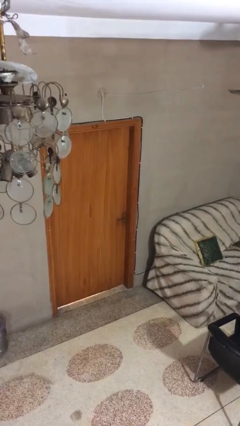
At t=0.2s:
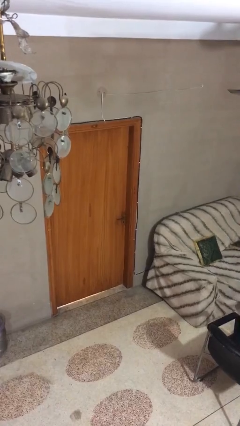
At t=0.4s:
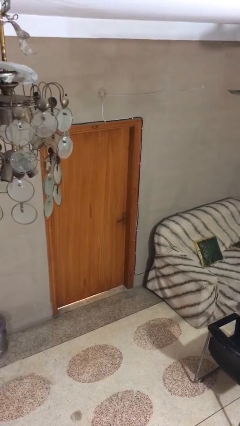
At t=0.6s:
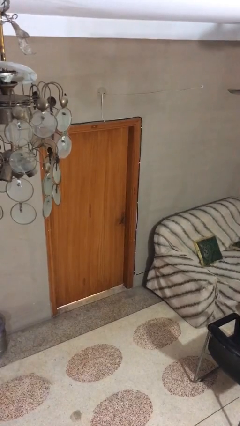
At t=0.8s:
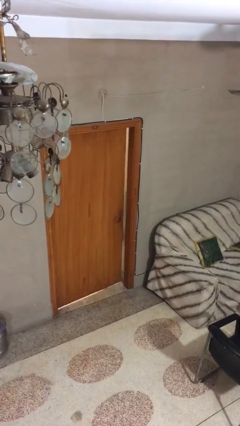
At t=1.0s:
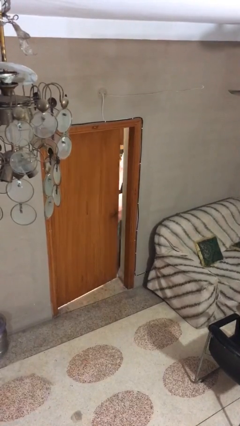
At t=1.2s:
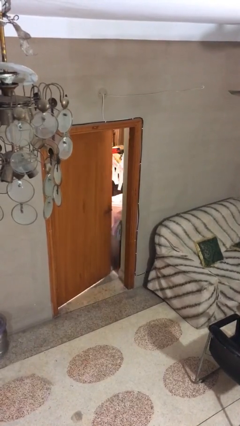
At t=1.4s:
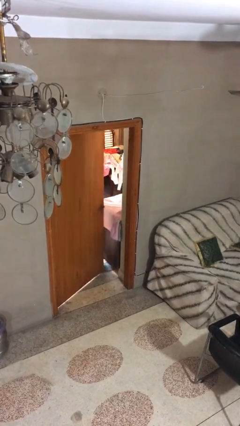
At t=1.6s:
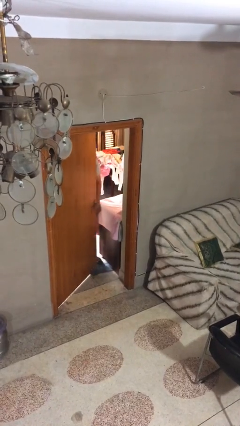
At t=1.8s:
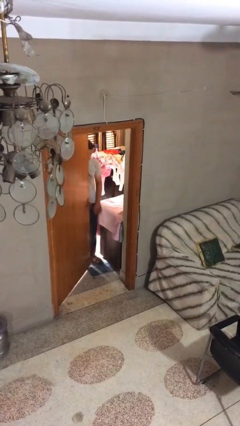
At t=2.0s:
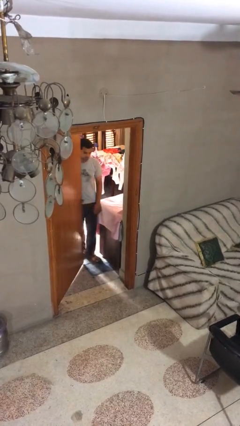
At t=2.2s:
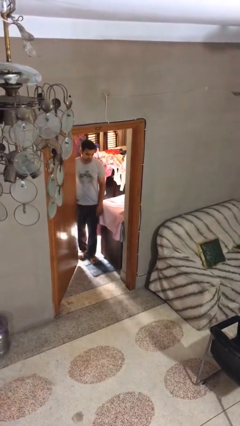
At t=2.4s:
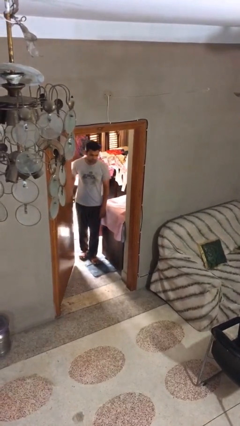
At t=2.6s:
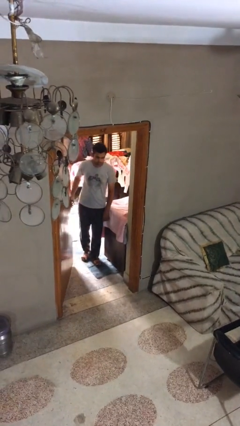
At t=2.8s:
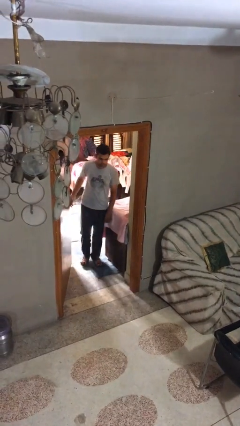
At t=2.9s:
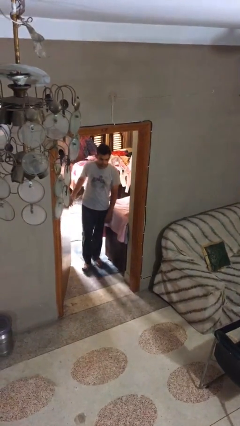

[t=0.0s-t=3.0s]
person opens facility door

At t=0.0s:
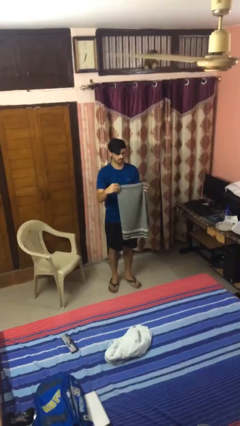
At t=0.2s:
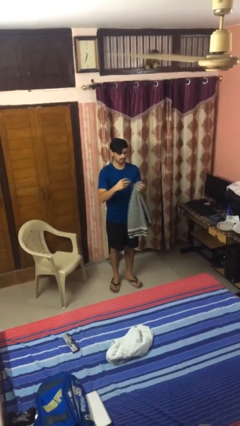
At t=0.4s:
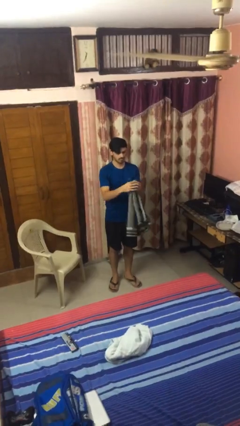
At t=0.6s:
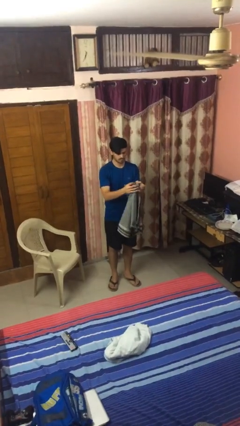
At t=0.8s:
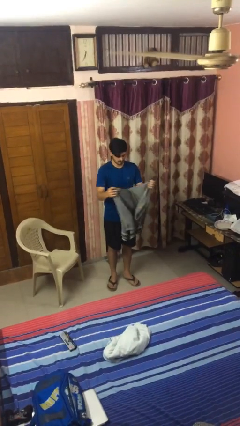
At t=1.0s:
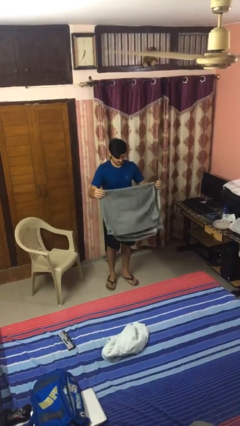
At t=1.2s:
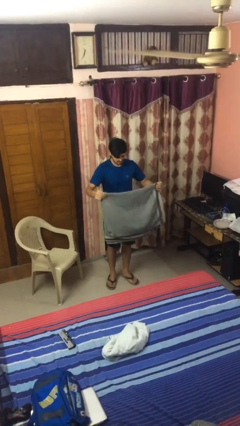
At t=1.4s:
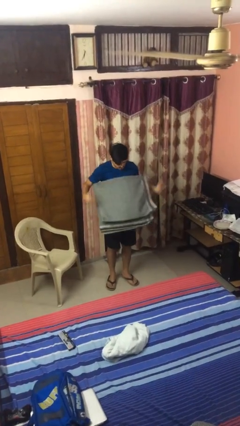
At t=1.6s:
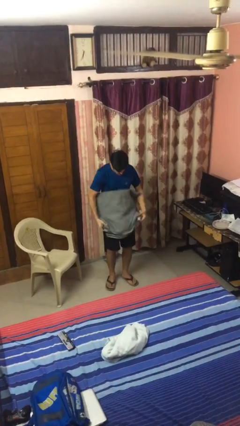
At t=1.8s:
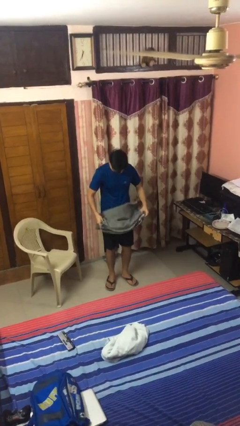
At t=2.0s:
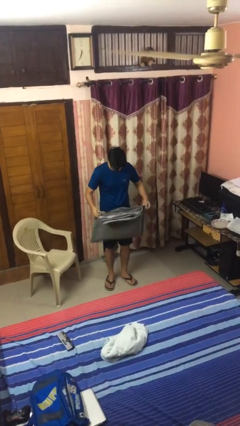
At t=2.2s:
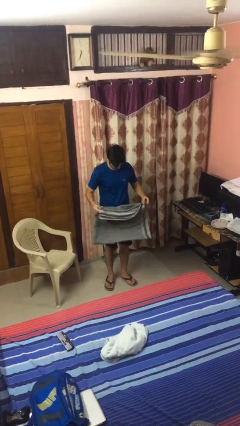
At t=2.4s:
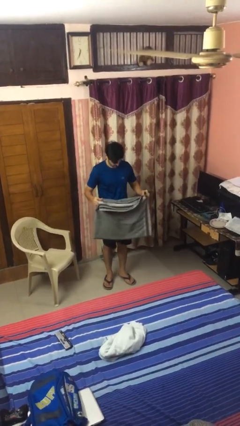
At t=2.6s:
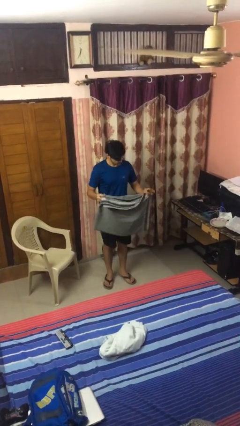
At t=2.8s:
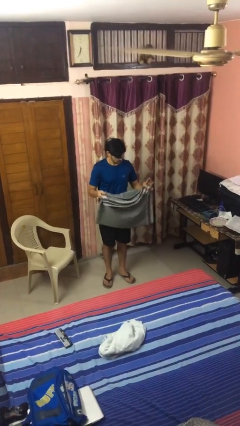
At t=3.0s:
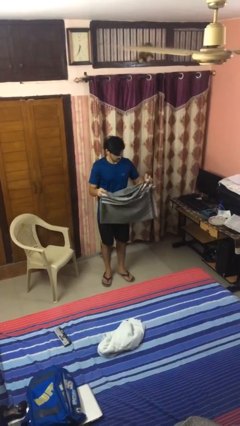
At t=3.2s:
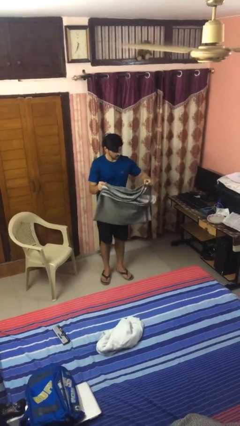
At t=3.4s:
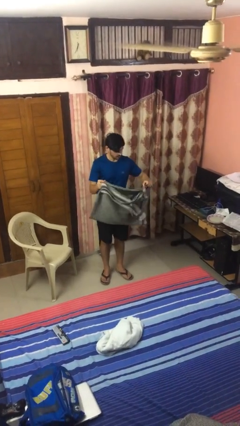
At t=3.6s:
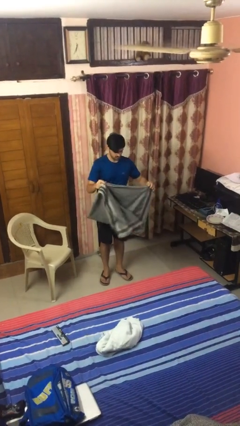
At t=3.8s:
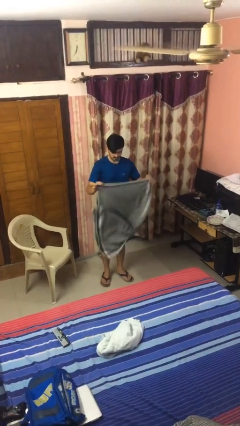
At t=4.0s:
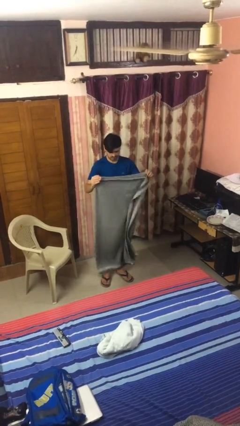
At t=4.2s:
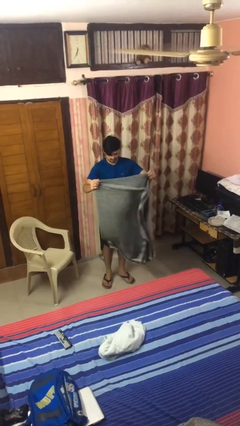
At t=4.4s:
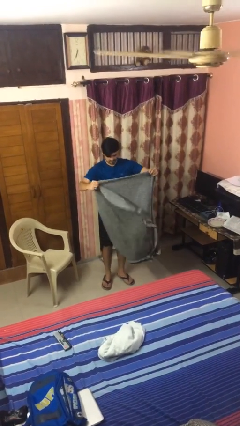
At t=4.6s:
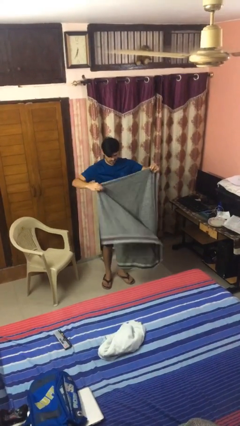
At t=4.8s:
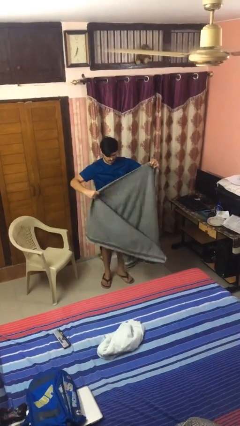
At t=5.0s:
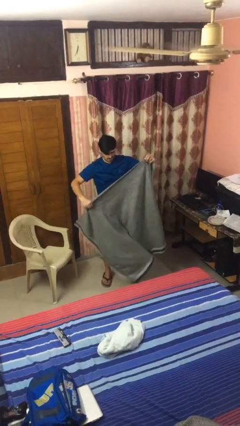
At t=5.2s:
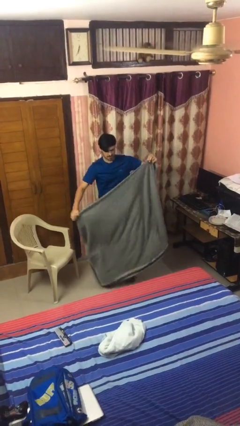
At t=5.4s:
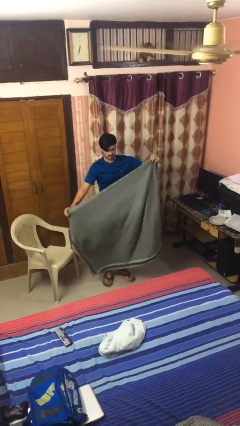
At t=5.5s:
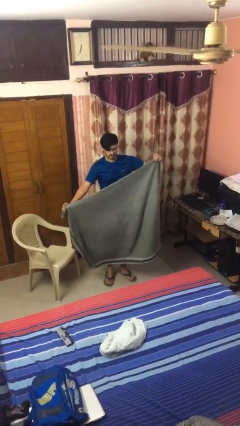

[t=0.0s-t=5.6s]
person unfolds blanket

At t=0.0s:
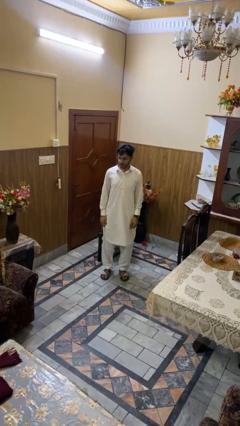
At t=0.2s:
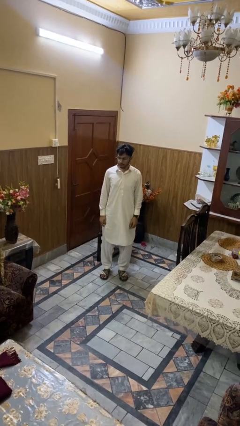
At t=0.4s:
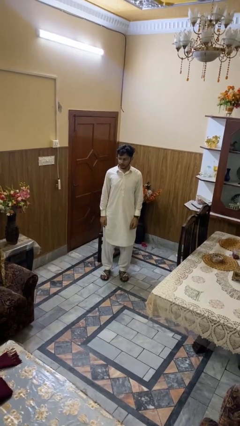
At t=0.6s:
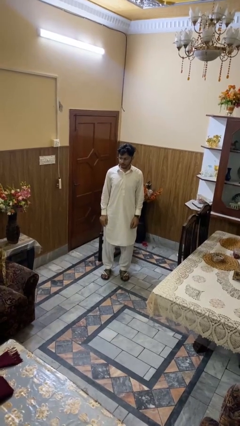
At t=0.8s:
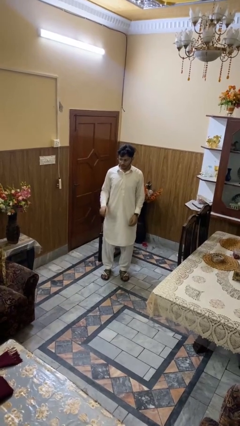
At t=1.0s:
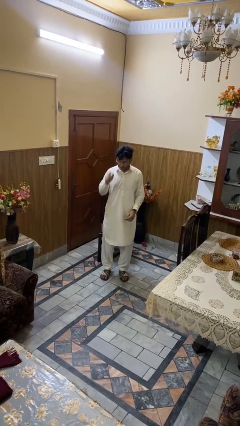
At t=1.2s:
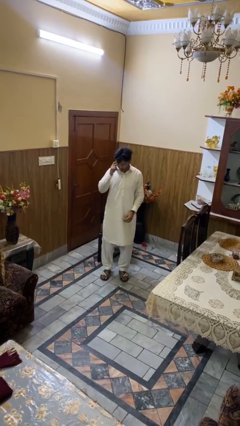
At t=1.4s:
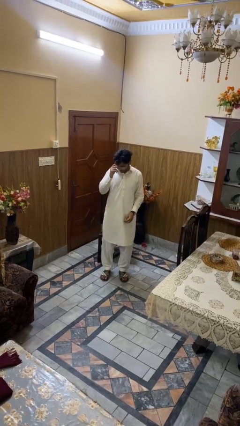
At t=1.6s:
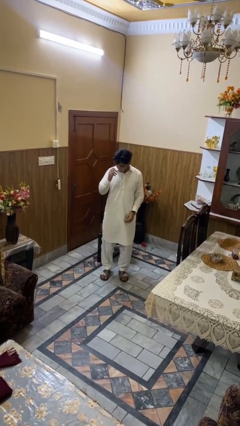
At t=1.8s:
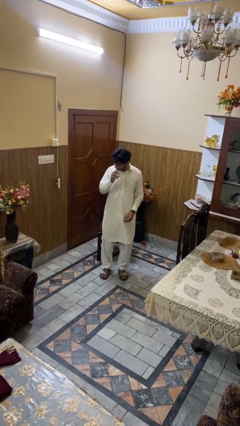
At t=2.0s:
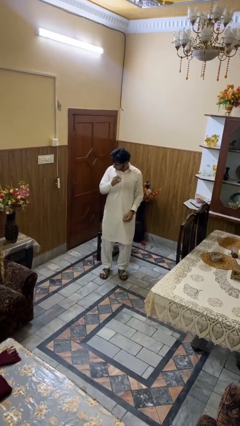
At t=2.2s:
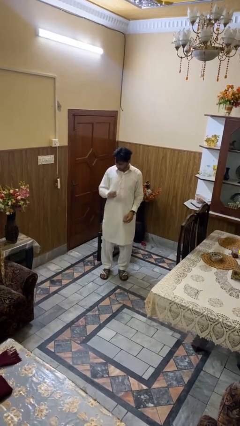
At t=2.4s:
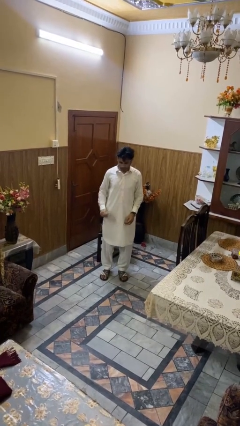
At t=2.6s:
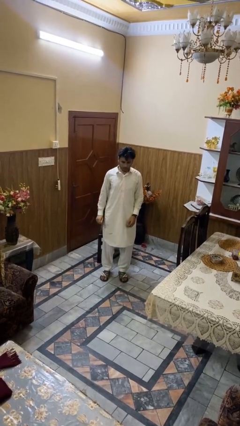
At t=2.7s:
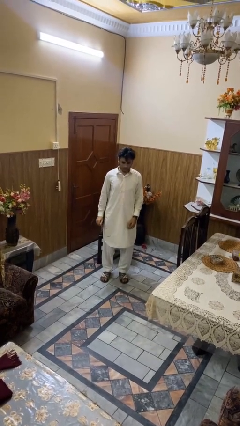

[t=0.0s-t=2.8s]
person takes off glasses

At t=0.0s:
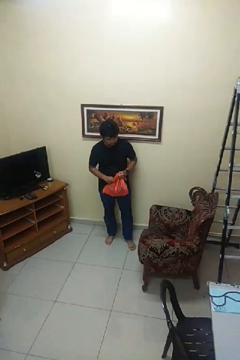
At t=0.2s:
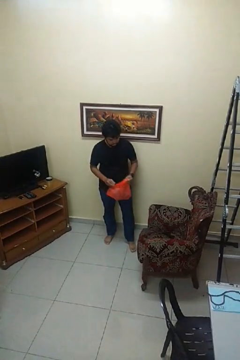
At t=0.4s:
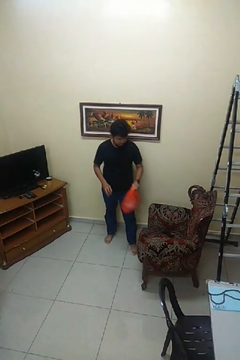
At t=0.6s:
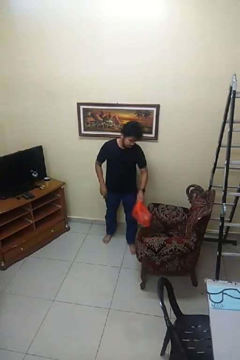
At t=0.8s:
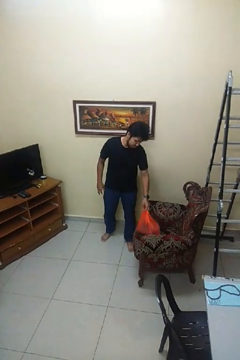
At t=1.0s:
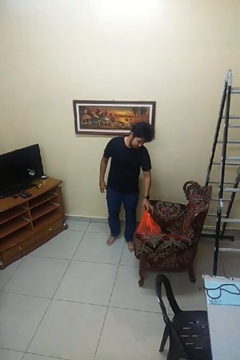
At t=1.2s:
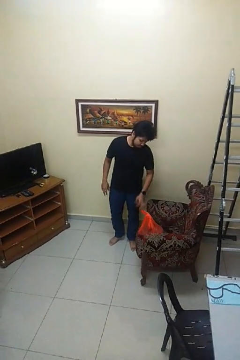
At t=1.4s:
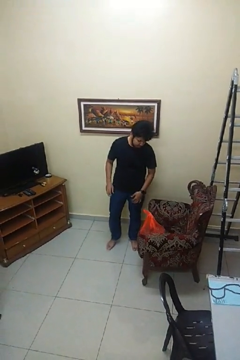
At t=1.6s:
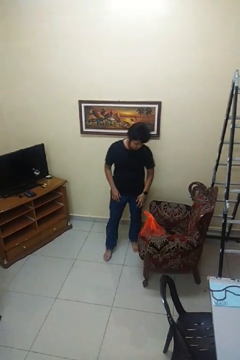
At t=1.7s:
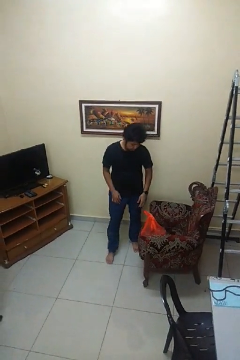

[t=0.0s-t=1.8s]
person puts down object on couch

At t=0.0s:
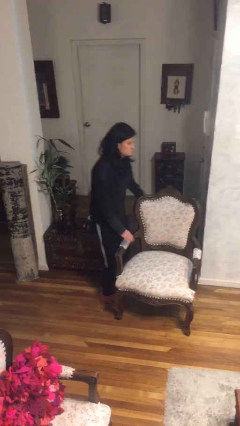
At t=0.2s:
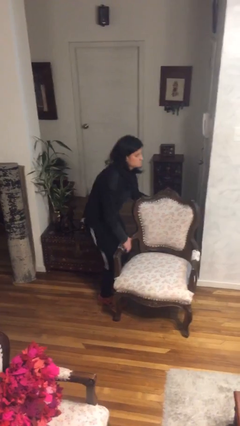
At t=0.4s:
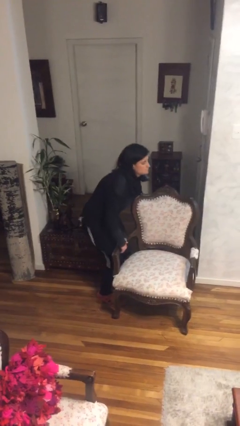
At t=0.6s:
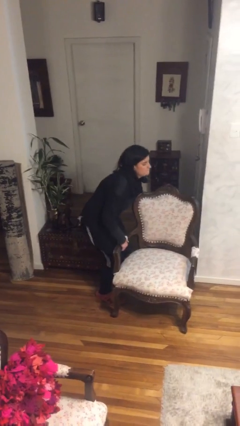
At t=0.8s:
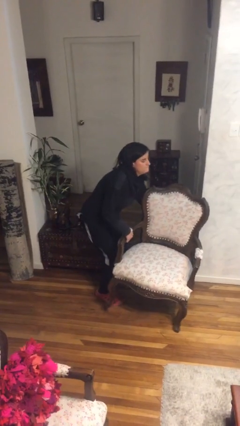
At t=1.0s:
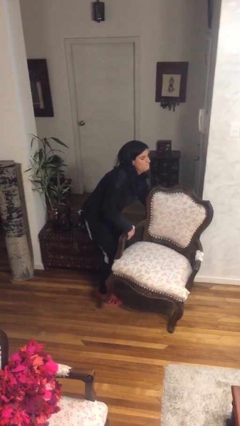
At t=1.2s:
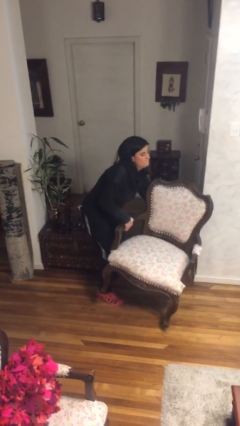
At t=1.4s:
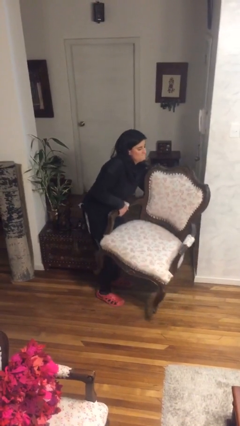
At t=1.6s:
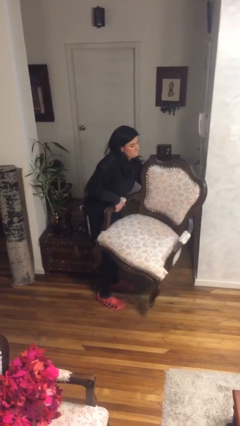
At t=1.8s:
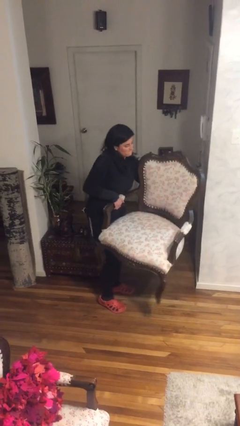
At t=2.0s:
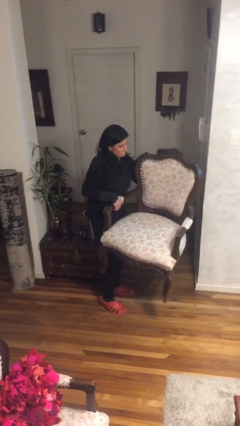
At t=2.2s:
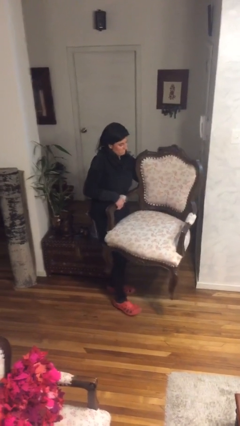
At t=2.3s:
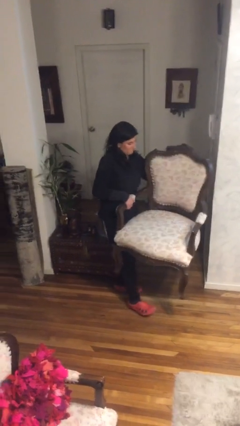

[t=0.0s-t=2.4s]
person picks up object from floor

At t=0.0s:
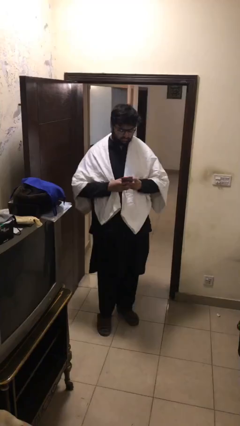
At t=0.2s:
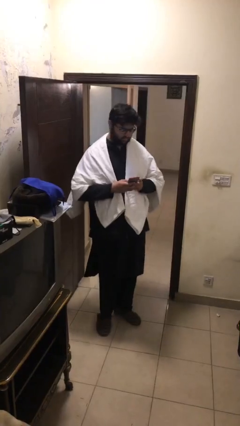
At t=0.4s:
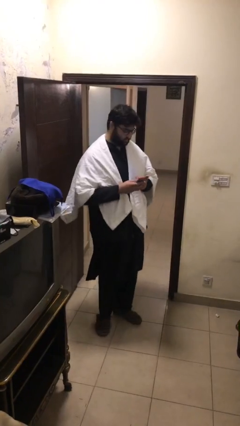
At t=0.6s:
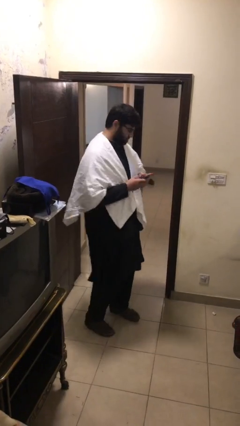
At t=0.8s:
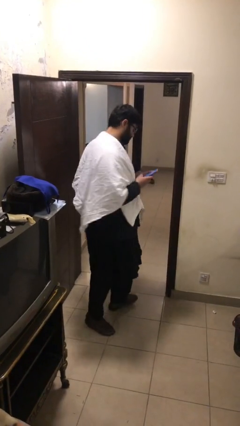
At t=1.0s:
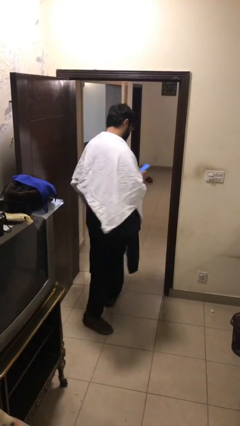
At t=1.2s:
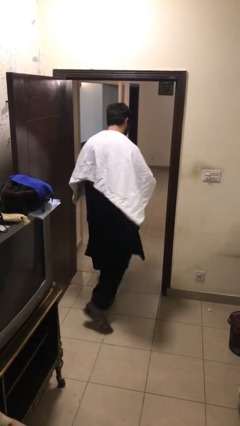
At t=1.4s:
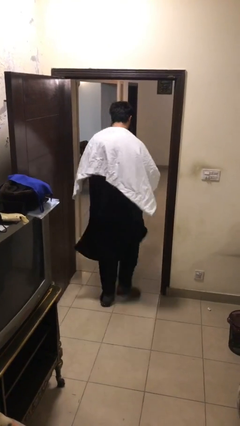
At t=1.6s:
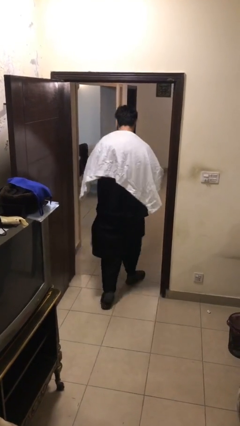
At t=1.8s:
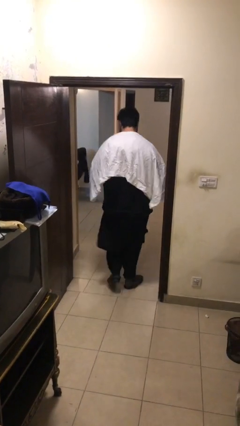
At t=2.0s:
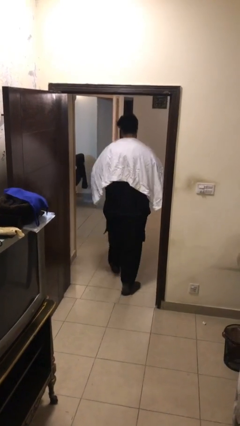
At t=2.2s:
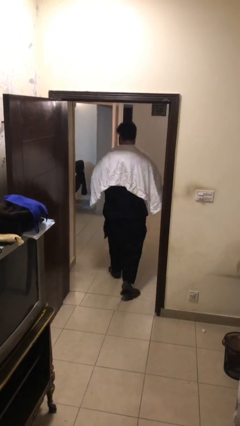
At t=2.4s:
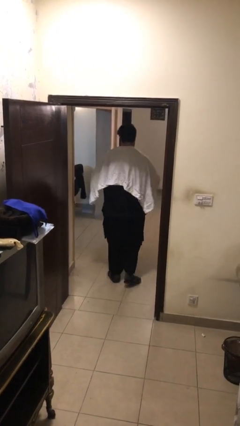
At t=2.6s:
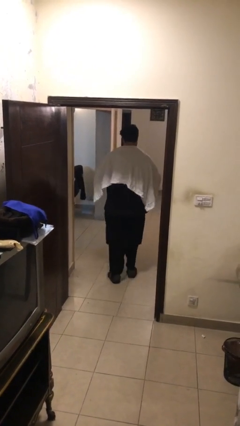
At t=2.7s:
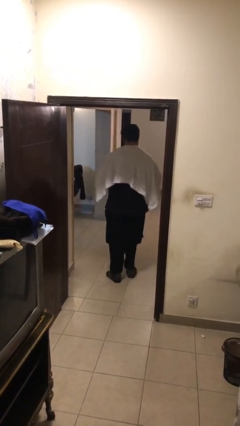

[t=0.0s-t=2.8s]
person exits scene through structure
